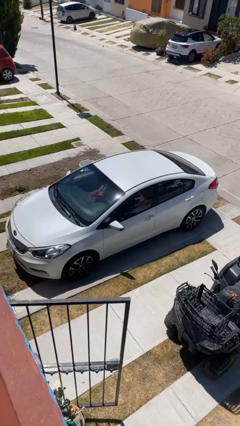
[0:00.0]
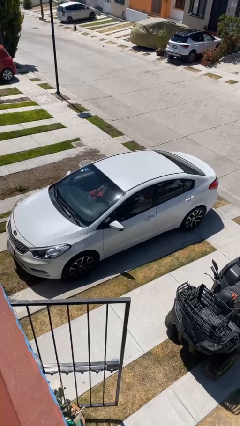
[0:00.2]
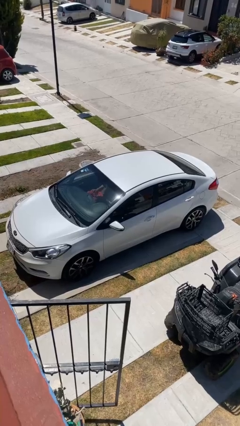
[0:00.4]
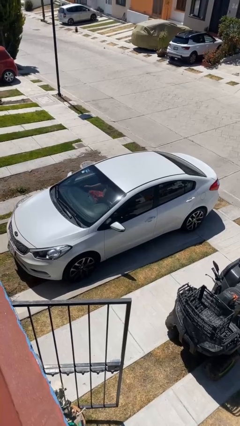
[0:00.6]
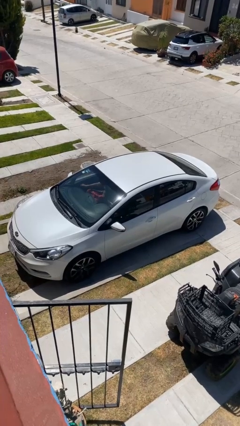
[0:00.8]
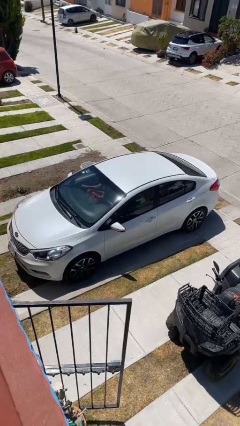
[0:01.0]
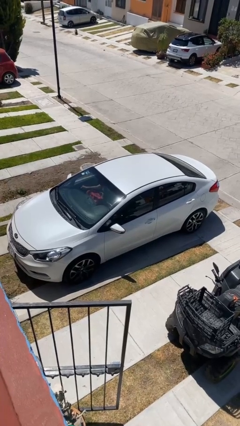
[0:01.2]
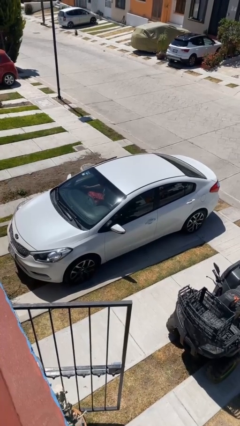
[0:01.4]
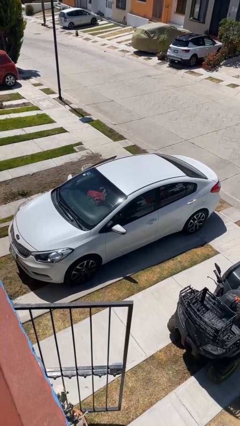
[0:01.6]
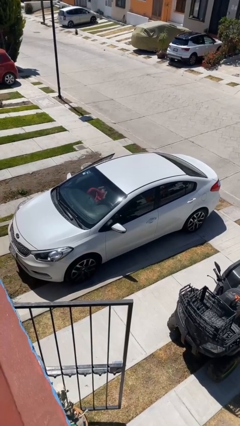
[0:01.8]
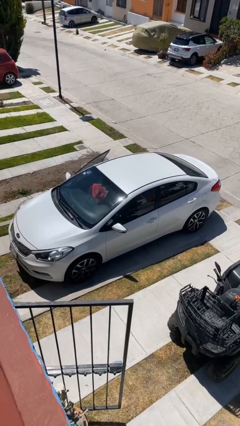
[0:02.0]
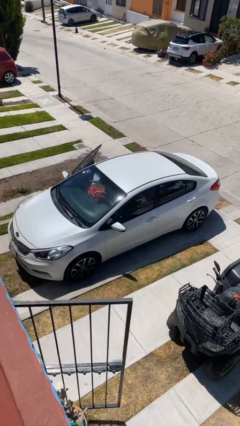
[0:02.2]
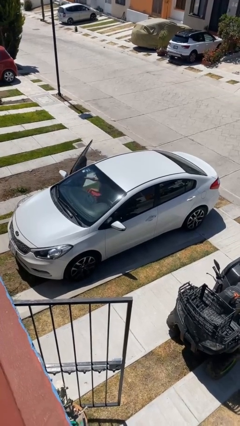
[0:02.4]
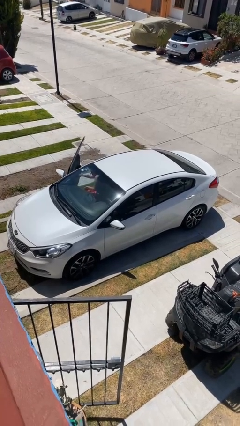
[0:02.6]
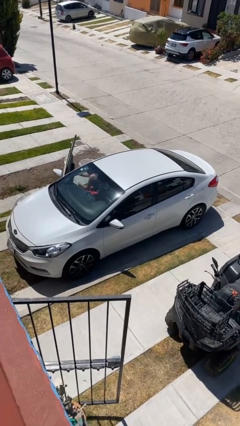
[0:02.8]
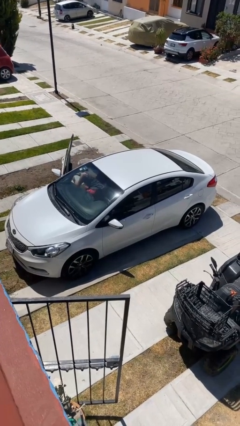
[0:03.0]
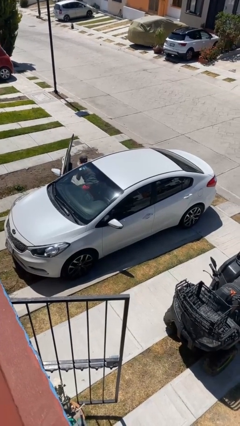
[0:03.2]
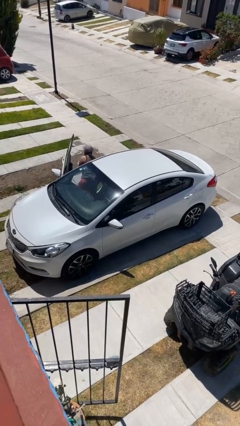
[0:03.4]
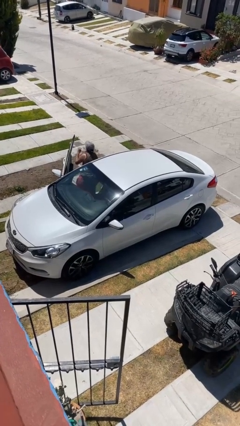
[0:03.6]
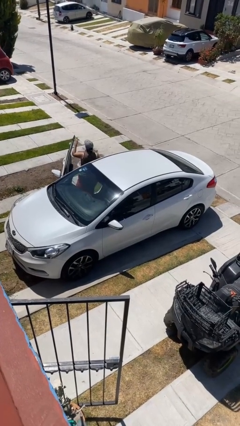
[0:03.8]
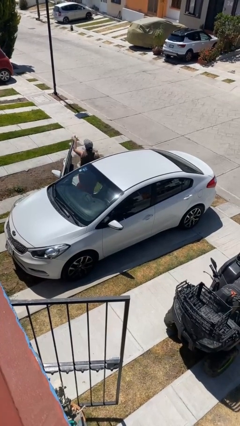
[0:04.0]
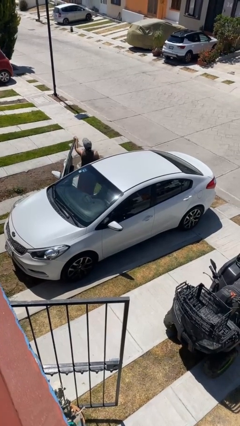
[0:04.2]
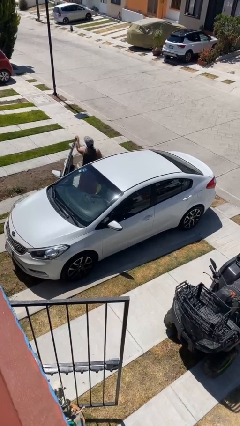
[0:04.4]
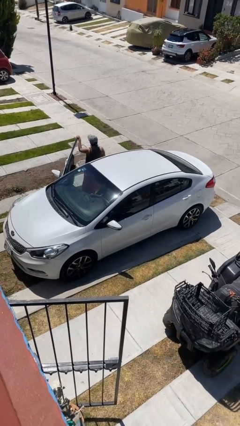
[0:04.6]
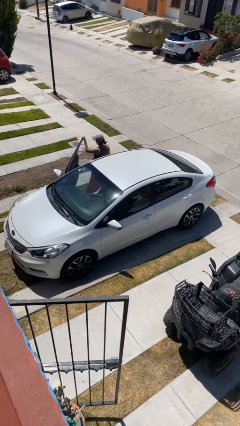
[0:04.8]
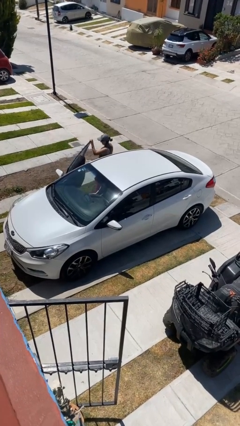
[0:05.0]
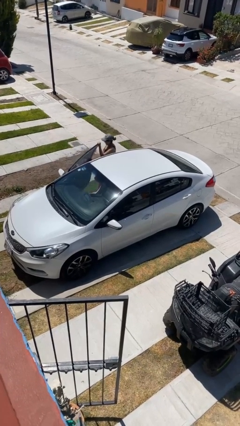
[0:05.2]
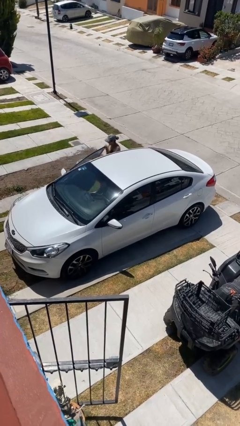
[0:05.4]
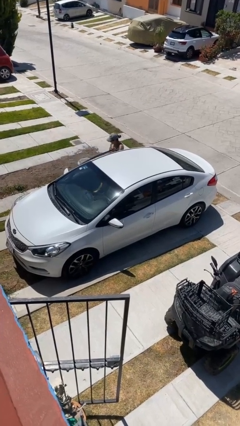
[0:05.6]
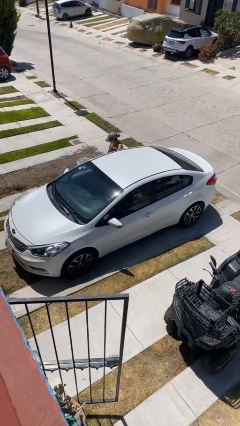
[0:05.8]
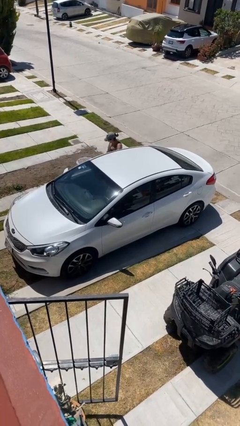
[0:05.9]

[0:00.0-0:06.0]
car drops off person

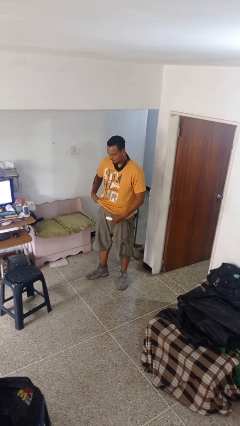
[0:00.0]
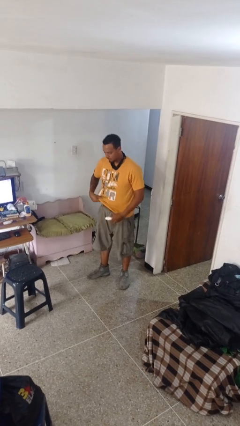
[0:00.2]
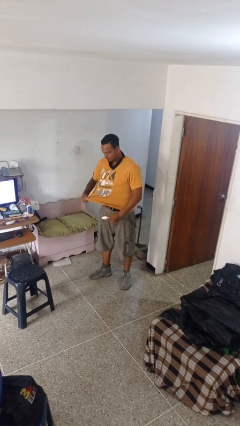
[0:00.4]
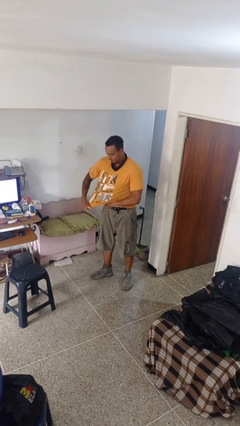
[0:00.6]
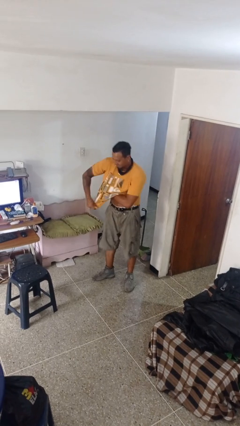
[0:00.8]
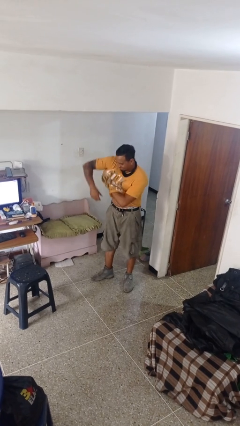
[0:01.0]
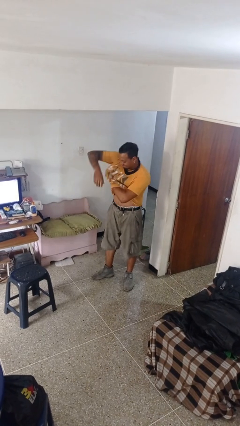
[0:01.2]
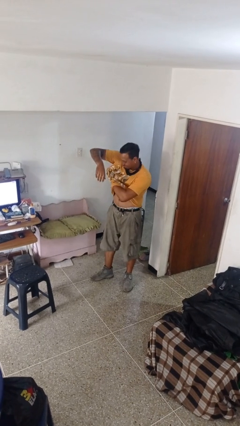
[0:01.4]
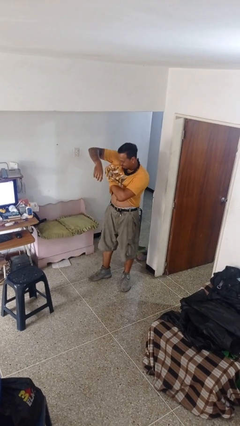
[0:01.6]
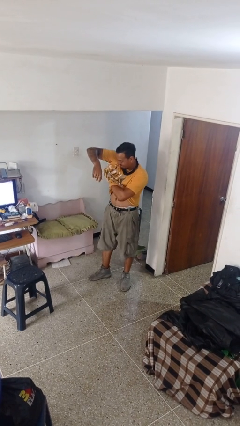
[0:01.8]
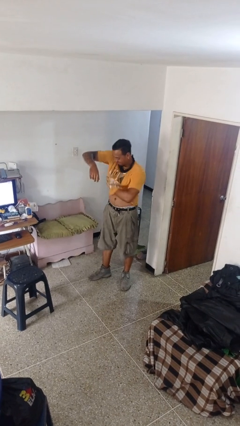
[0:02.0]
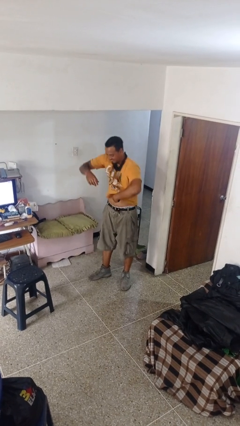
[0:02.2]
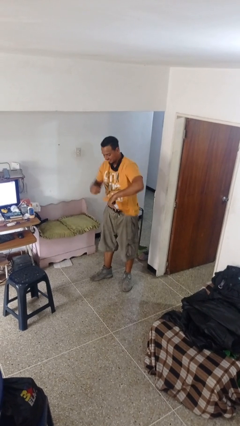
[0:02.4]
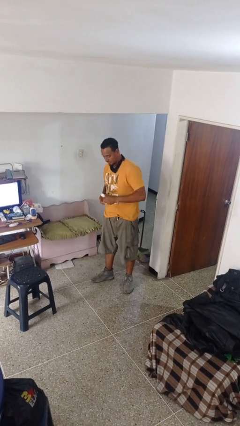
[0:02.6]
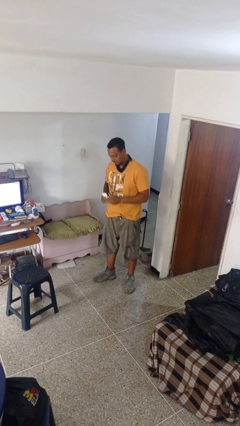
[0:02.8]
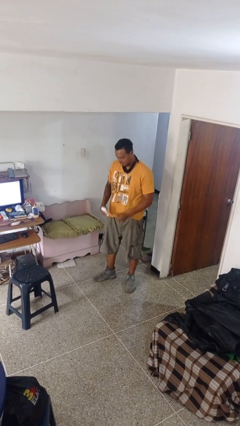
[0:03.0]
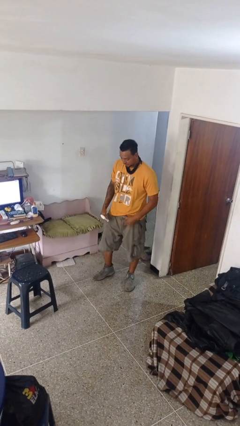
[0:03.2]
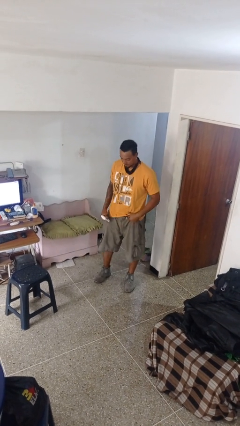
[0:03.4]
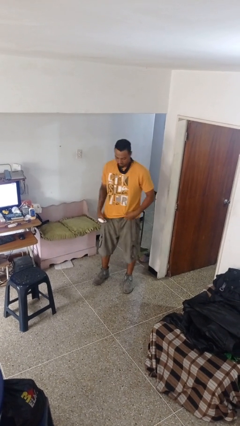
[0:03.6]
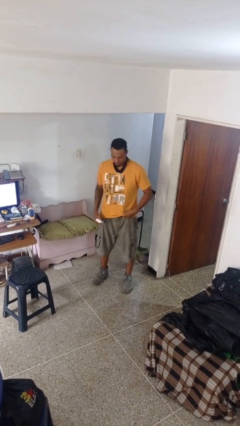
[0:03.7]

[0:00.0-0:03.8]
person applies deodorant

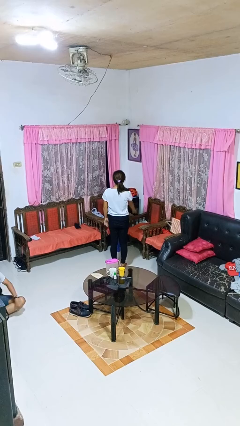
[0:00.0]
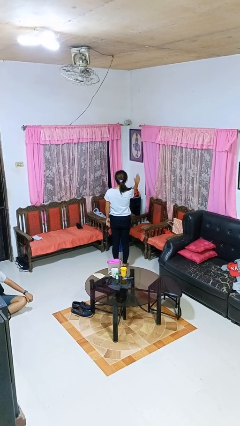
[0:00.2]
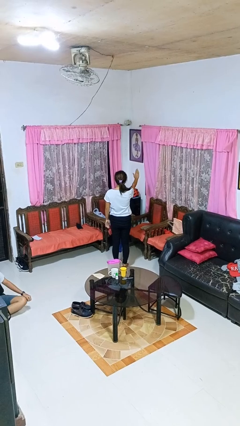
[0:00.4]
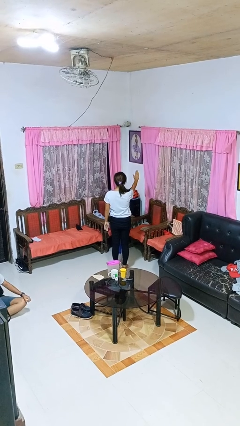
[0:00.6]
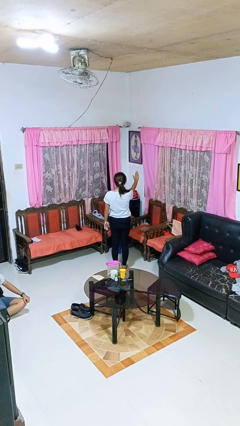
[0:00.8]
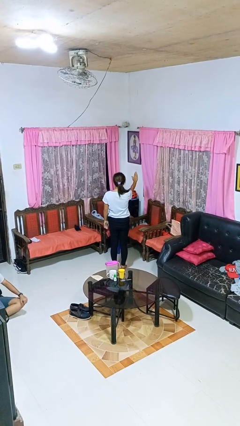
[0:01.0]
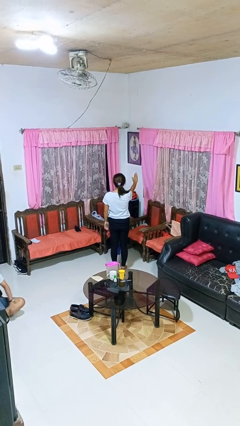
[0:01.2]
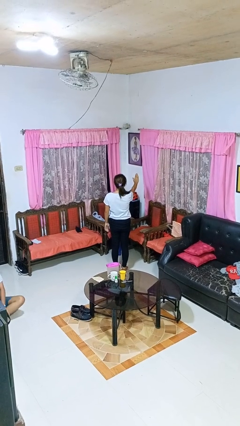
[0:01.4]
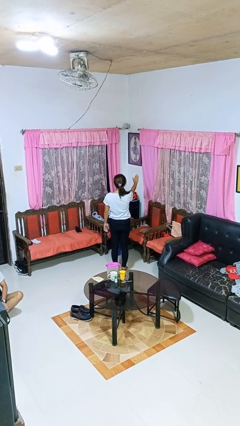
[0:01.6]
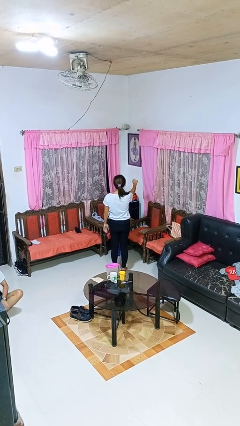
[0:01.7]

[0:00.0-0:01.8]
person gestures stop

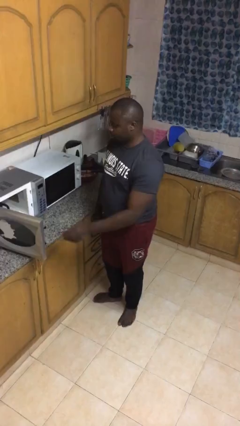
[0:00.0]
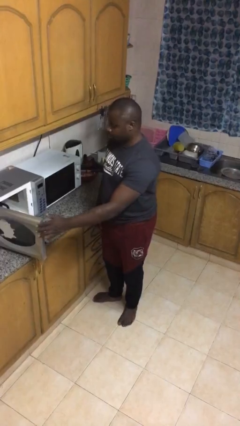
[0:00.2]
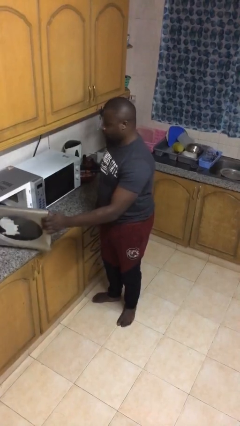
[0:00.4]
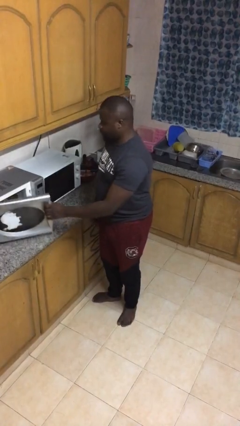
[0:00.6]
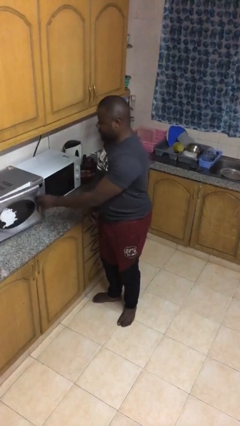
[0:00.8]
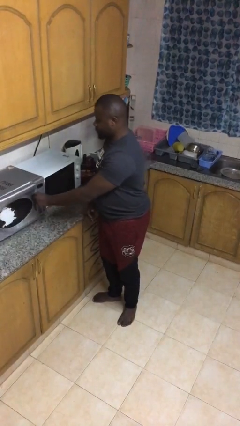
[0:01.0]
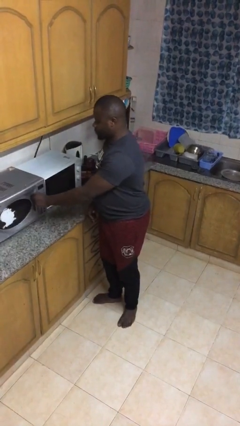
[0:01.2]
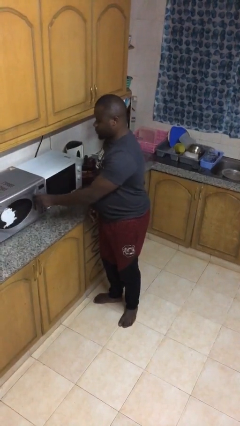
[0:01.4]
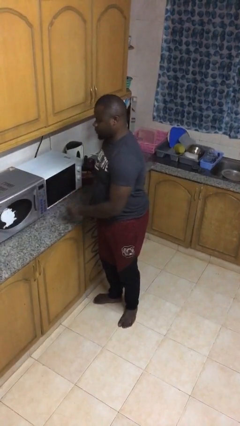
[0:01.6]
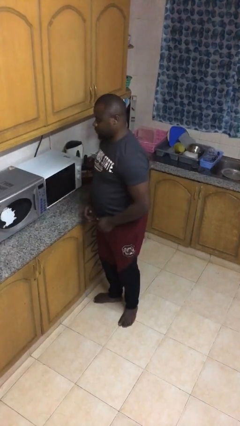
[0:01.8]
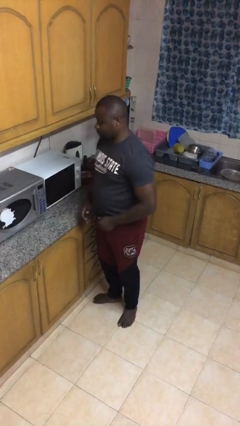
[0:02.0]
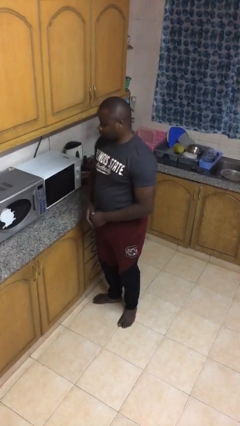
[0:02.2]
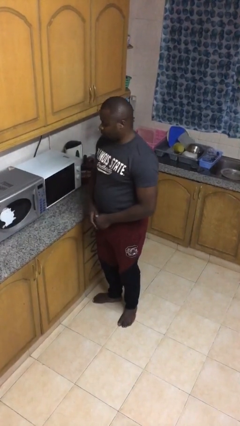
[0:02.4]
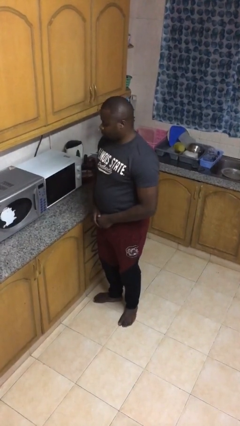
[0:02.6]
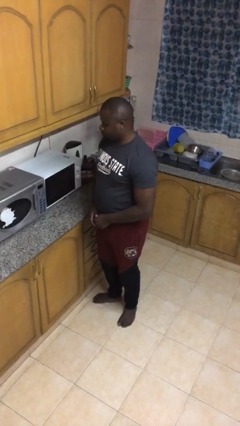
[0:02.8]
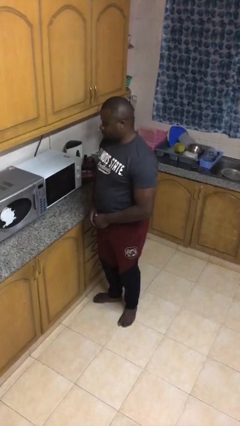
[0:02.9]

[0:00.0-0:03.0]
person closes microwave

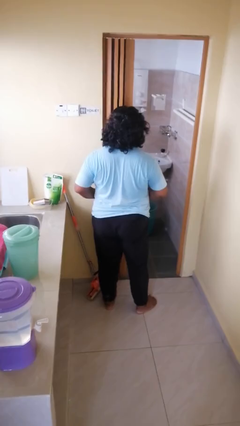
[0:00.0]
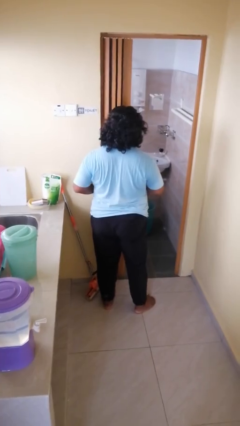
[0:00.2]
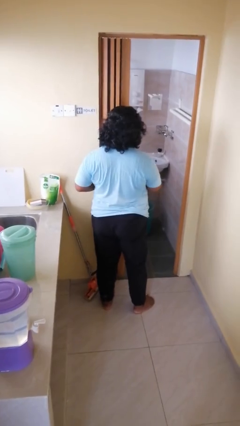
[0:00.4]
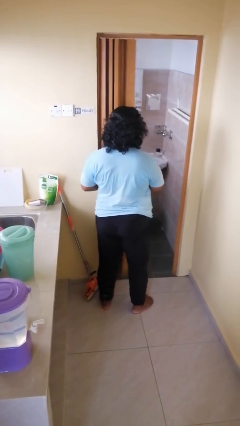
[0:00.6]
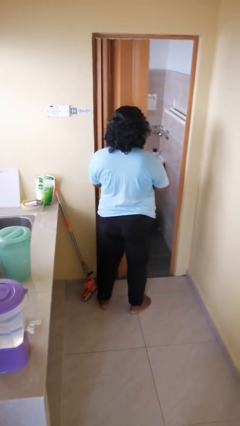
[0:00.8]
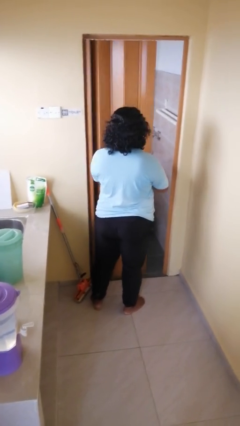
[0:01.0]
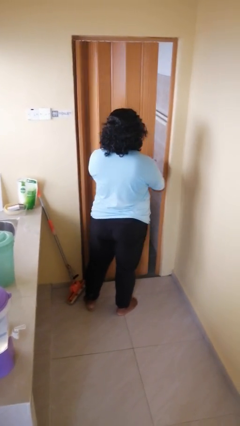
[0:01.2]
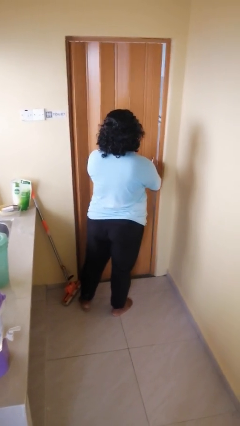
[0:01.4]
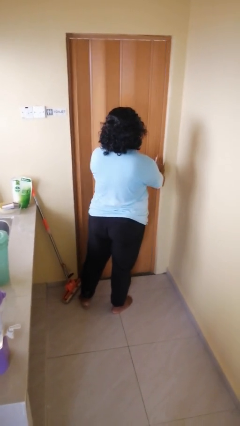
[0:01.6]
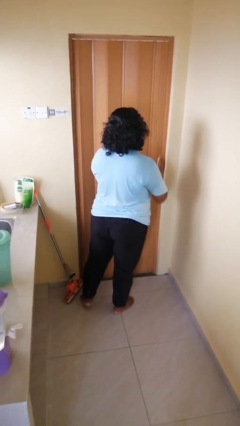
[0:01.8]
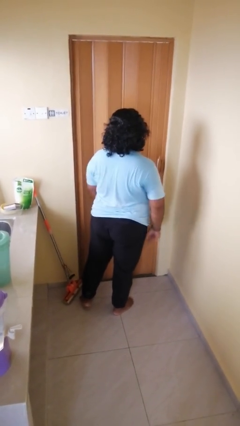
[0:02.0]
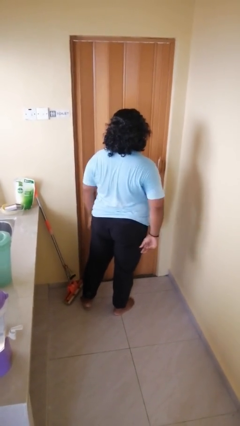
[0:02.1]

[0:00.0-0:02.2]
person closes sliding door

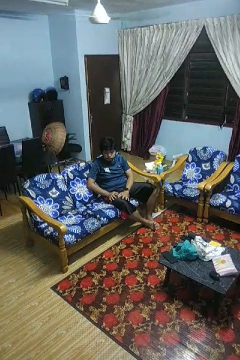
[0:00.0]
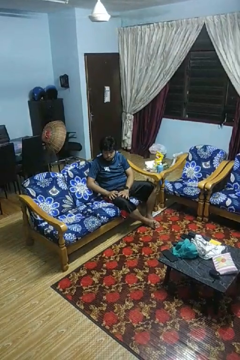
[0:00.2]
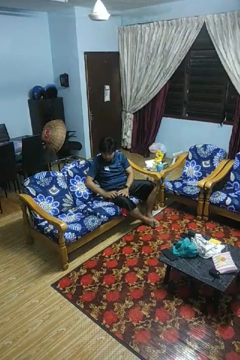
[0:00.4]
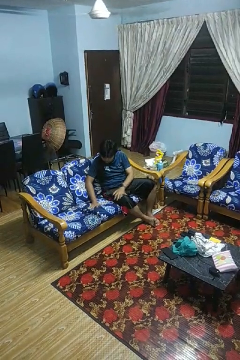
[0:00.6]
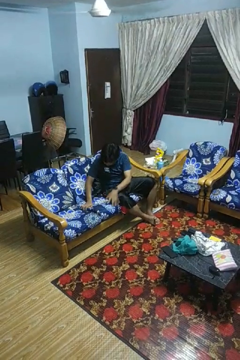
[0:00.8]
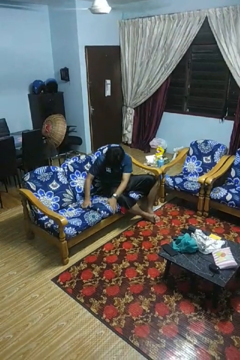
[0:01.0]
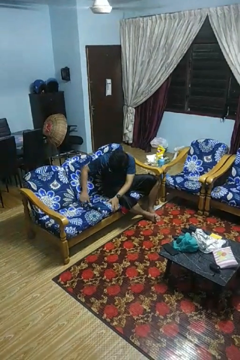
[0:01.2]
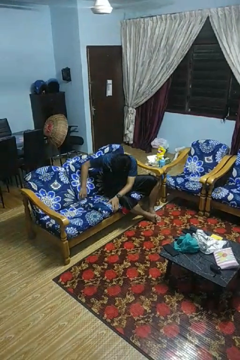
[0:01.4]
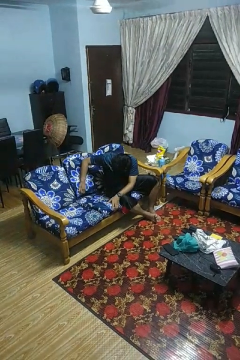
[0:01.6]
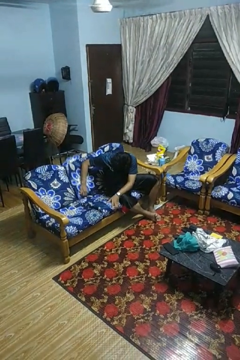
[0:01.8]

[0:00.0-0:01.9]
person searches in couch
